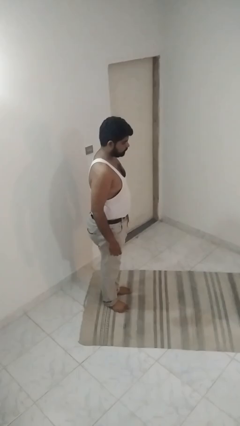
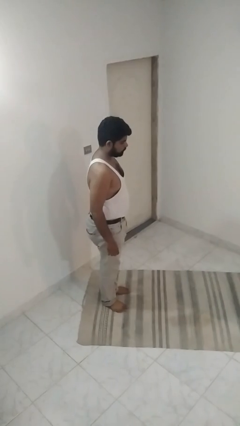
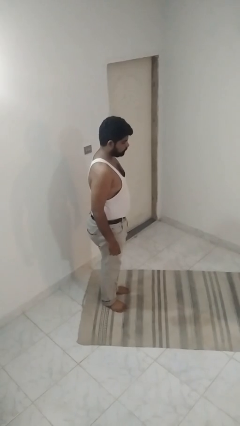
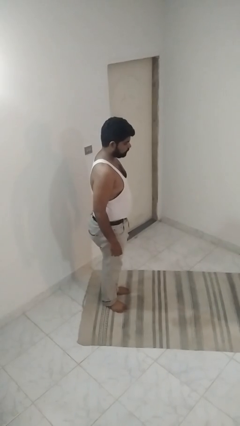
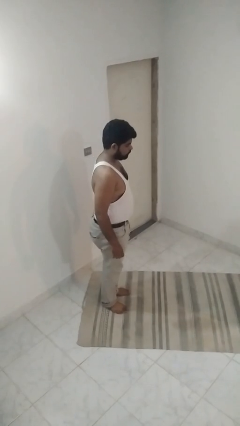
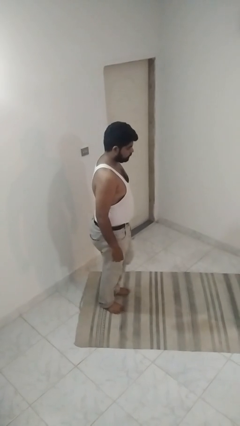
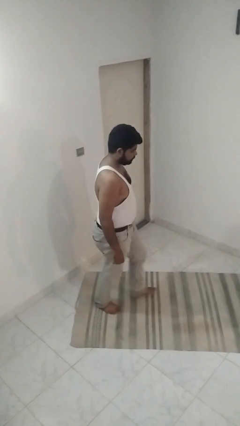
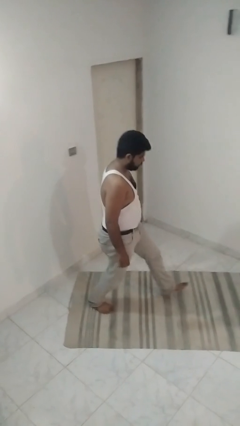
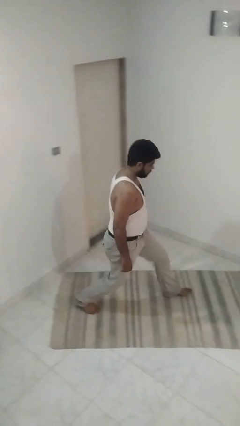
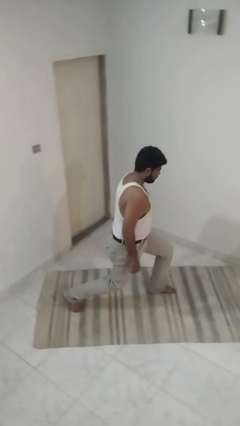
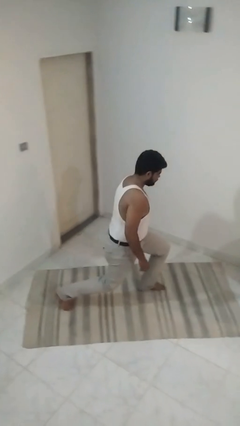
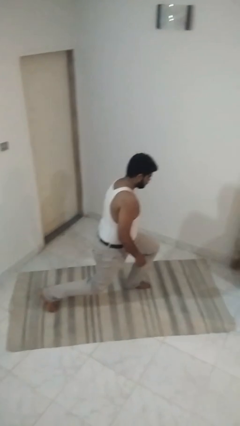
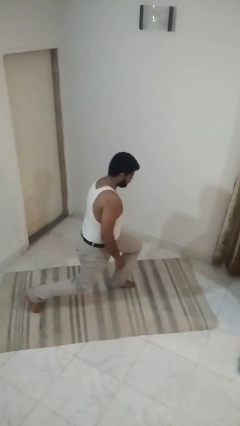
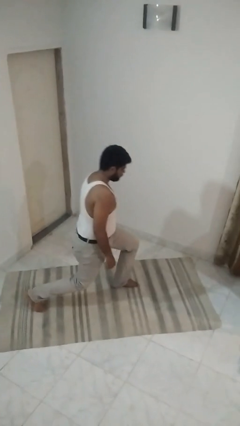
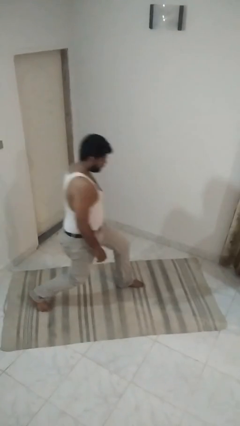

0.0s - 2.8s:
person exercises with lunges

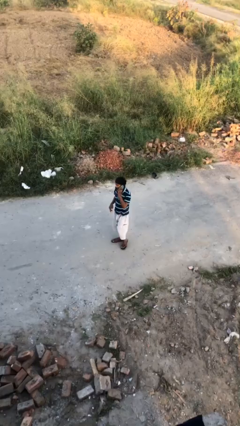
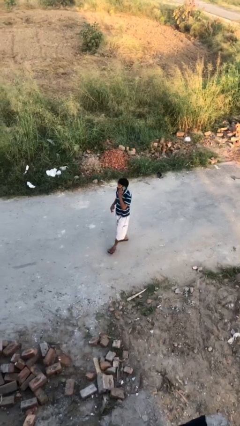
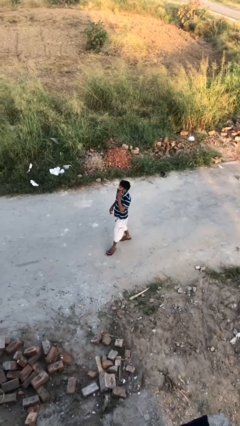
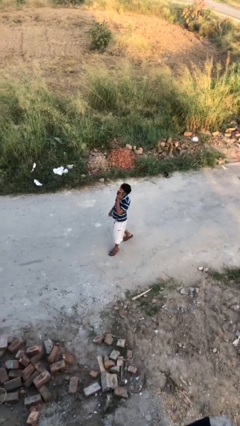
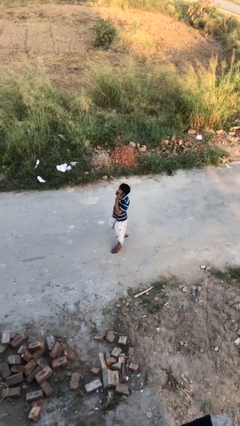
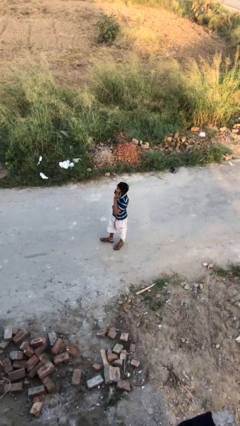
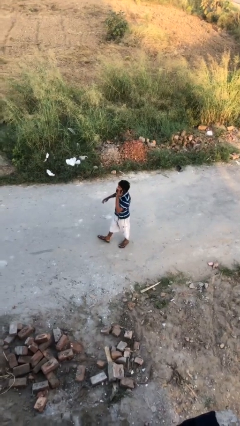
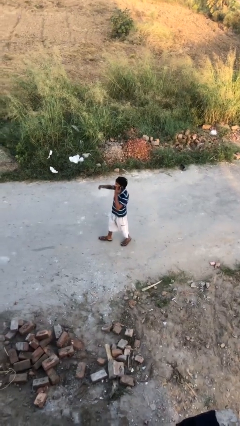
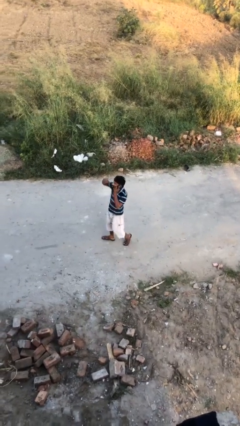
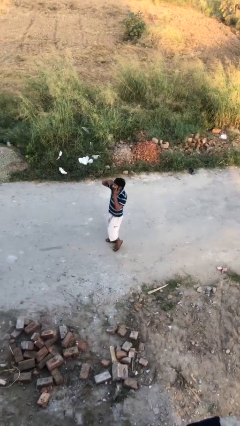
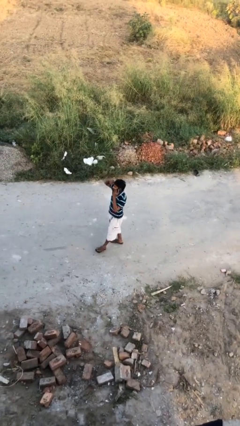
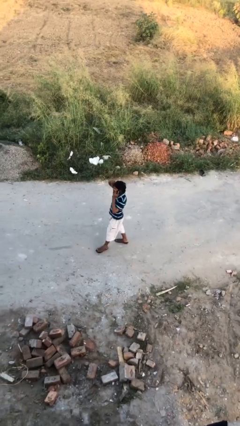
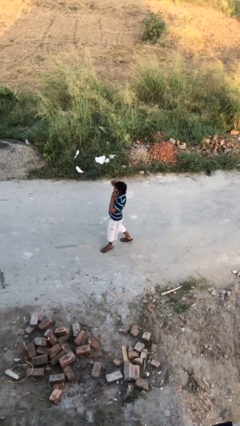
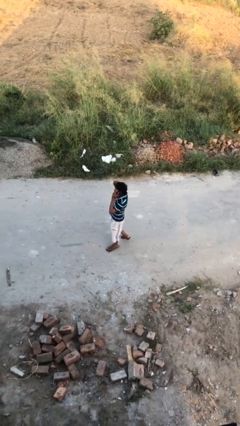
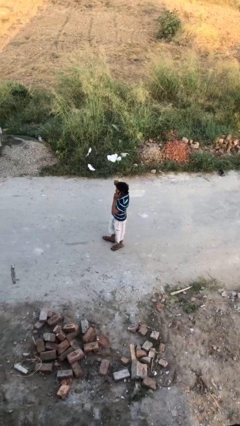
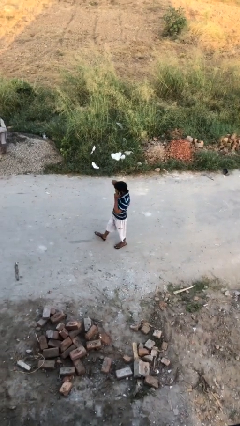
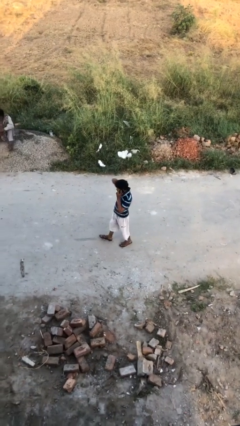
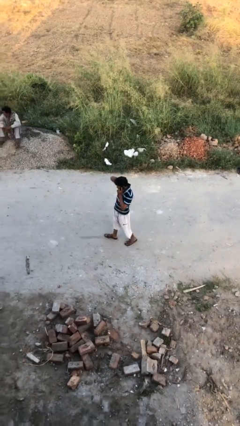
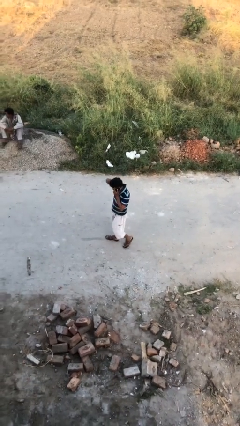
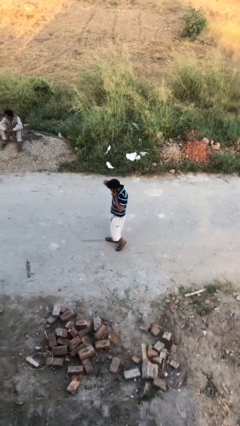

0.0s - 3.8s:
person talks on phone

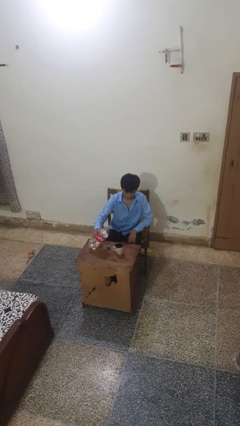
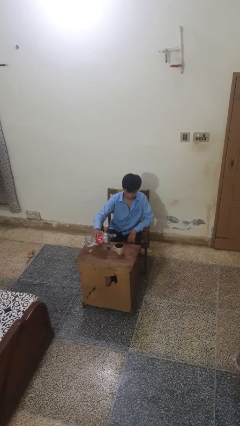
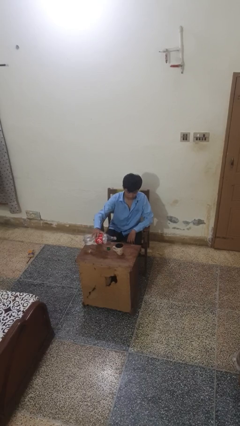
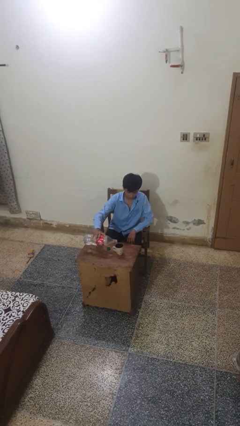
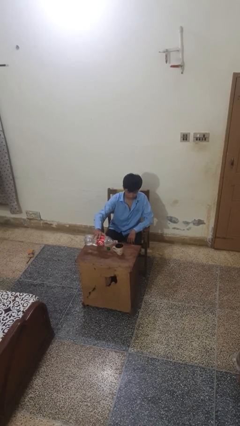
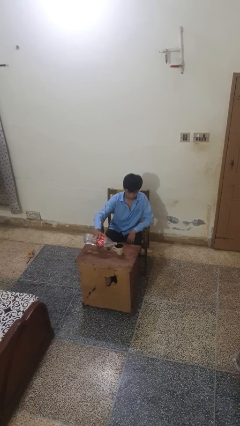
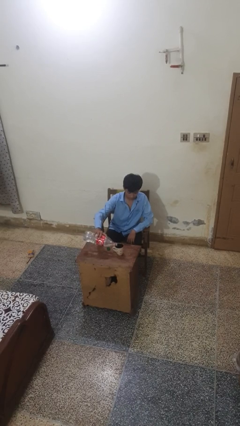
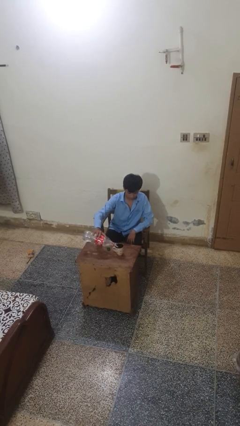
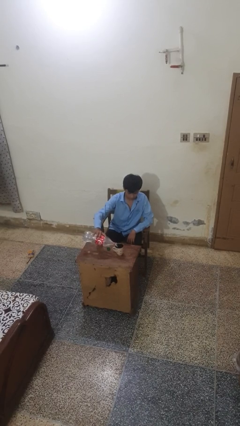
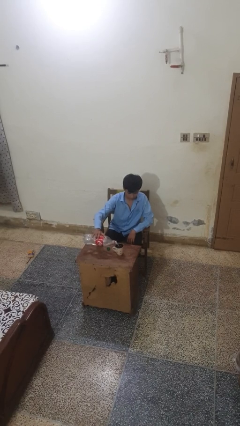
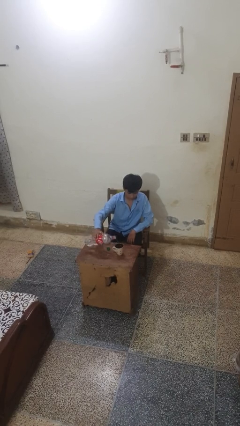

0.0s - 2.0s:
person pours liquid into cup

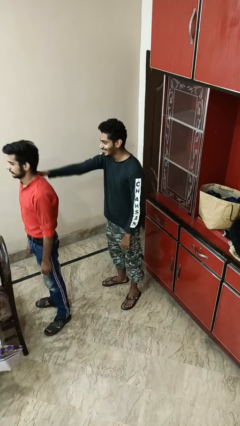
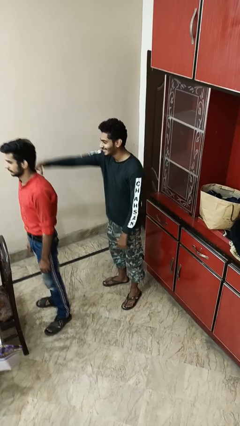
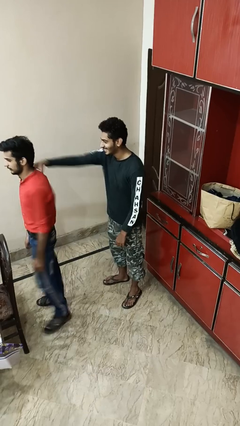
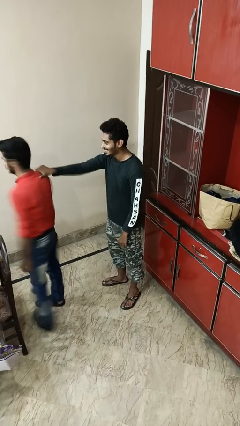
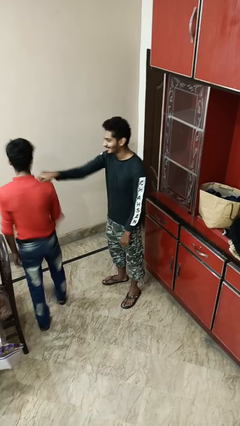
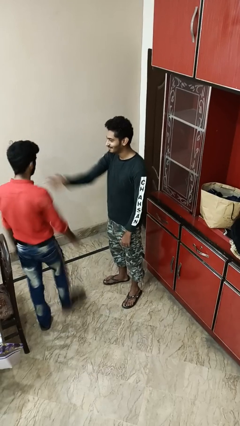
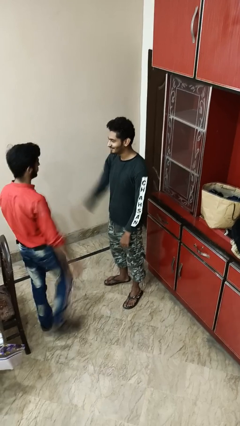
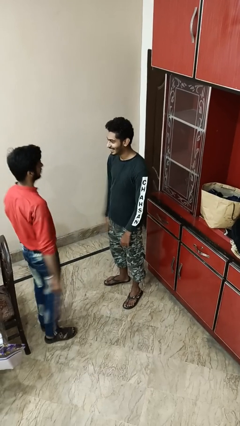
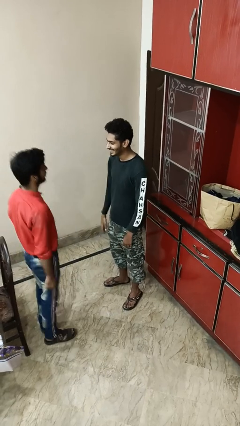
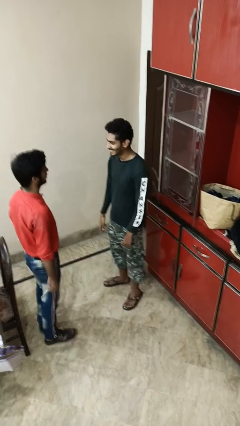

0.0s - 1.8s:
person spins person around

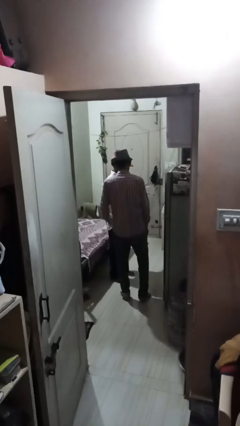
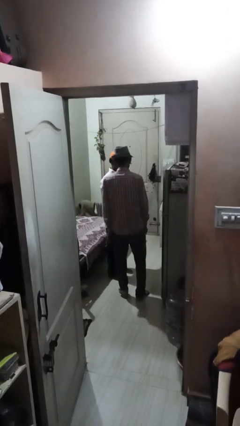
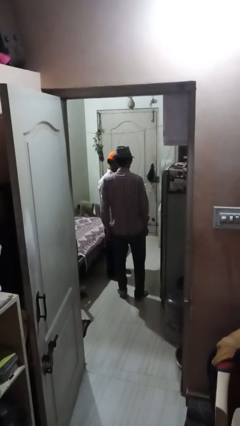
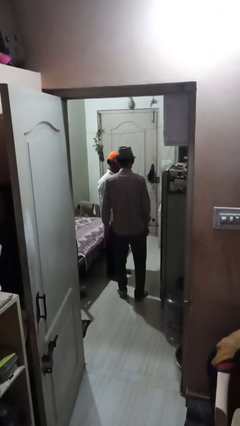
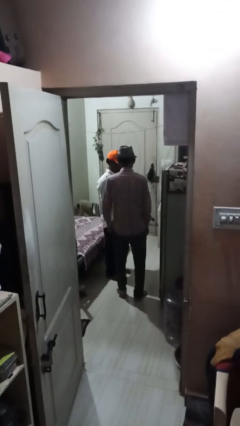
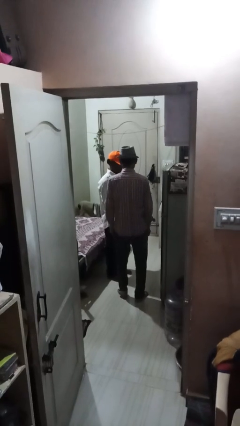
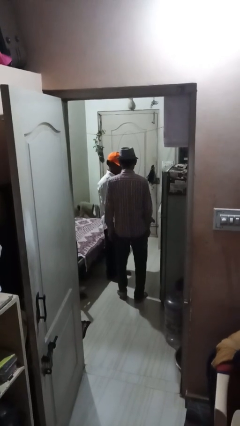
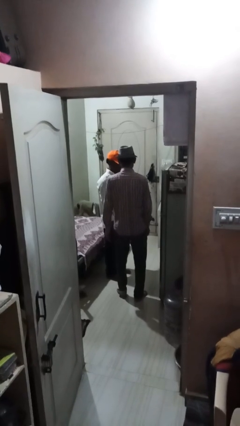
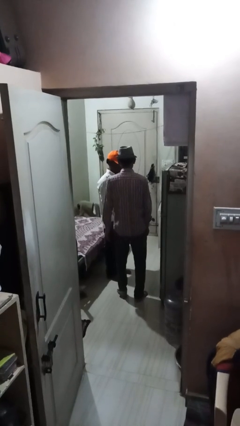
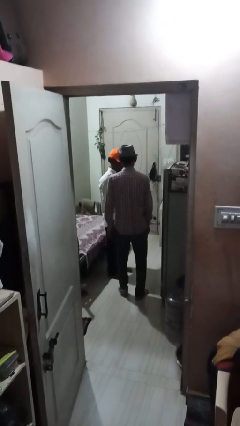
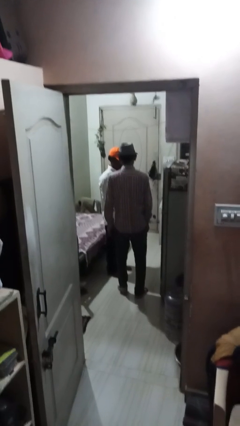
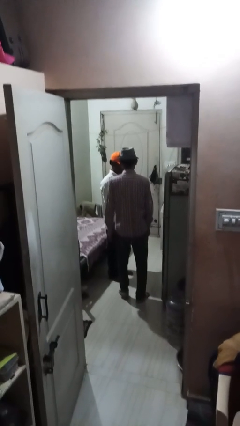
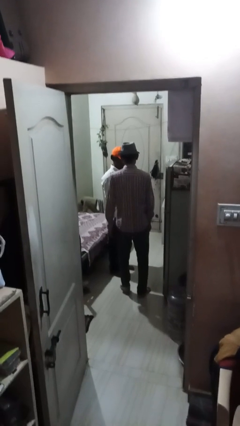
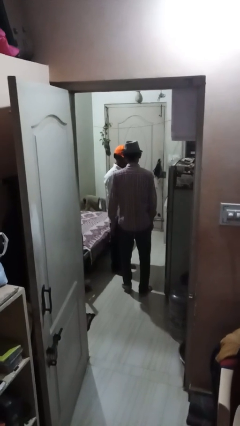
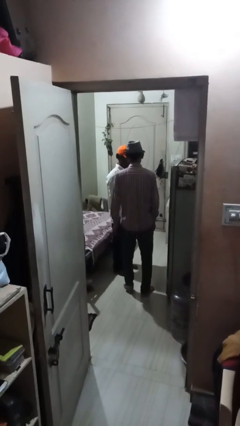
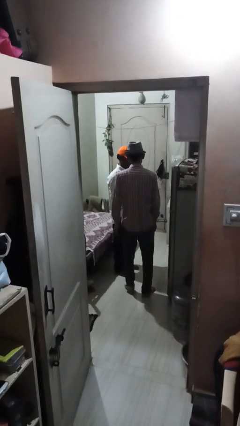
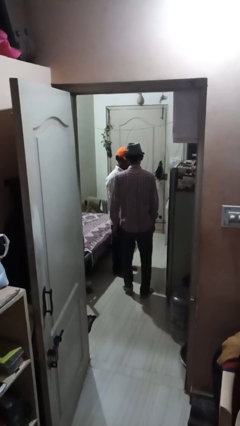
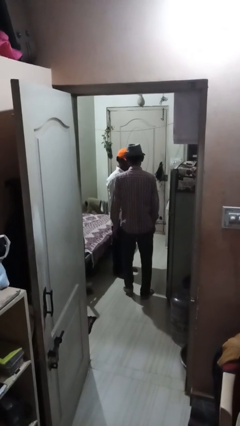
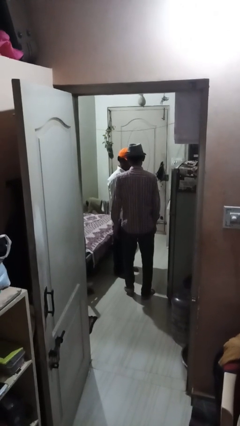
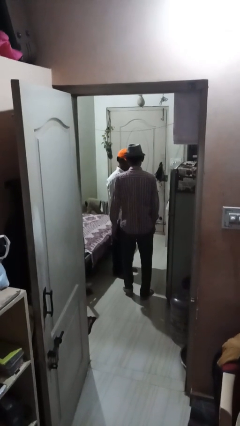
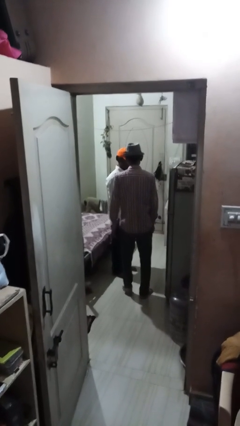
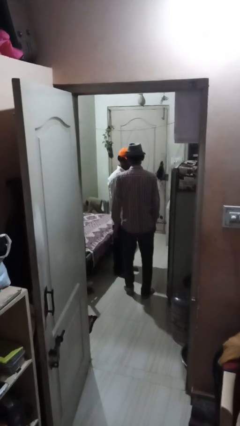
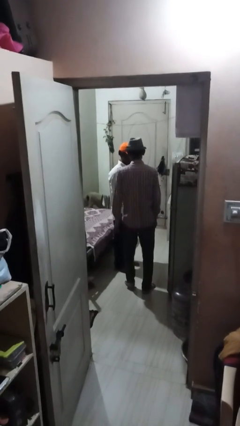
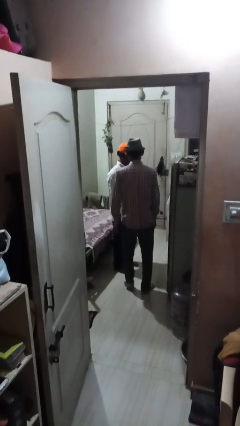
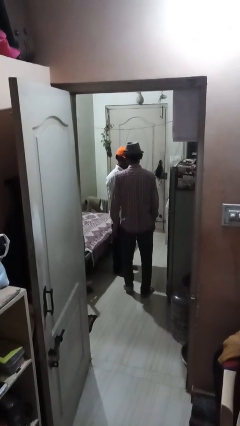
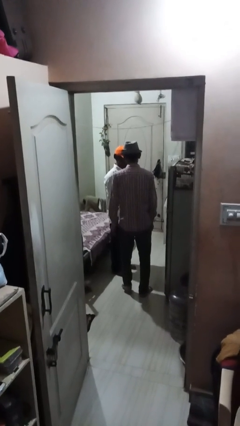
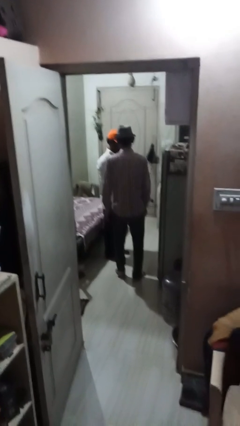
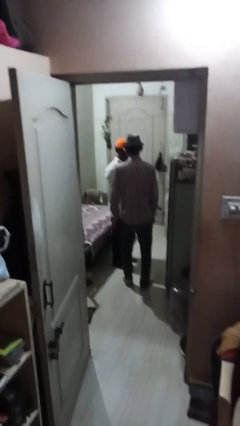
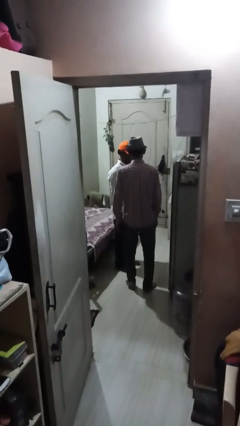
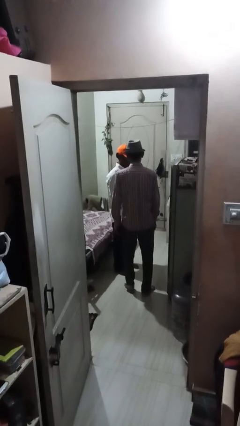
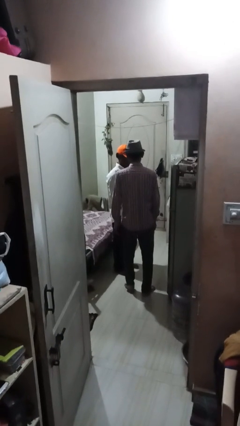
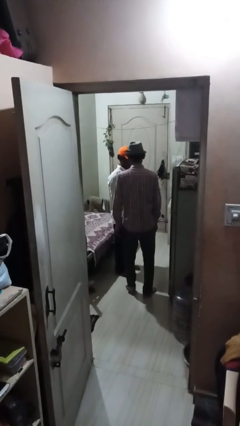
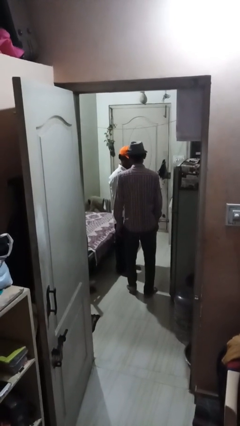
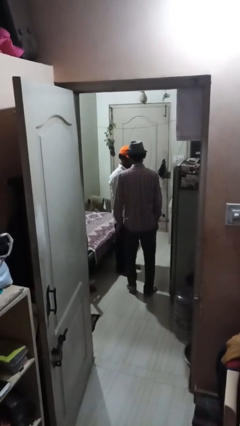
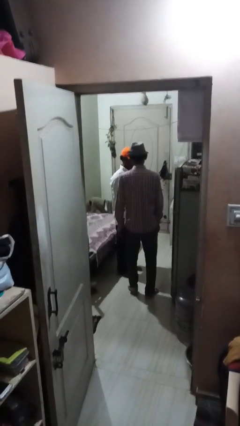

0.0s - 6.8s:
person pounds shoulders of person

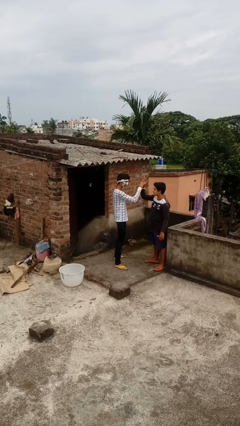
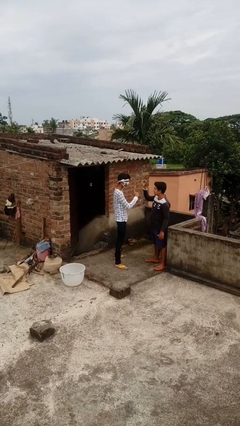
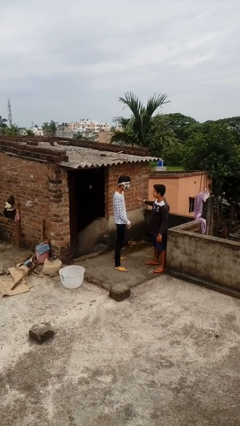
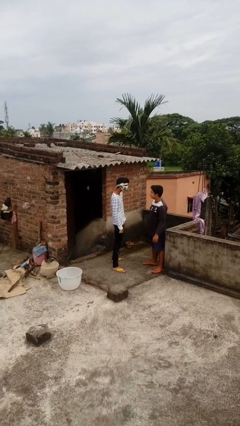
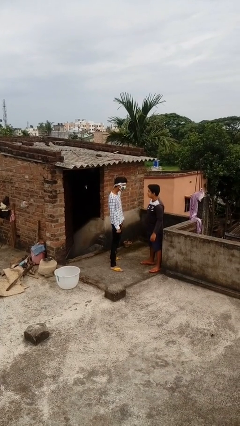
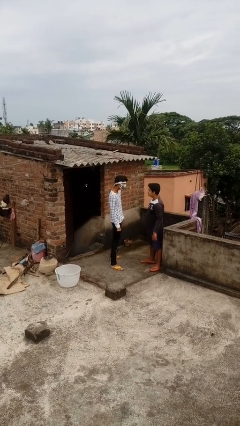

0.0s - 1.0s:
person highfives hand
